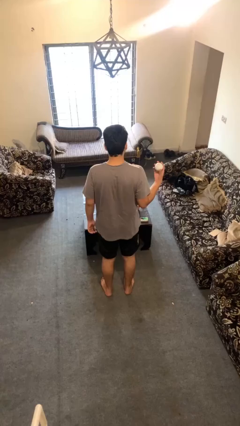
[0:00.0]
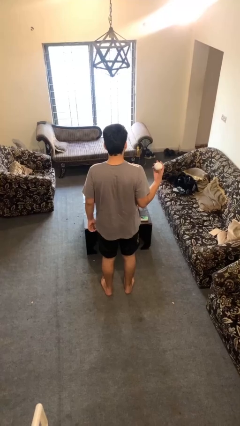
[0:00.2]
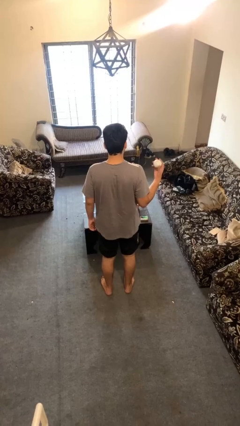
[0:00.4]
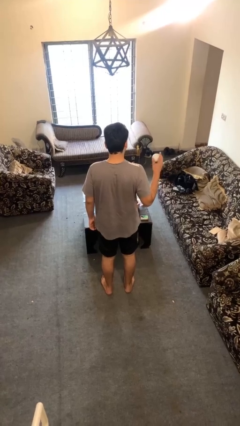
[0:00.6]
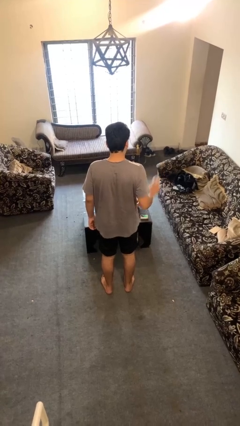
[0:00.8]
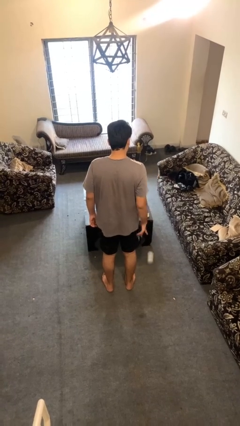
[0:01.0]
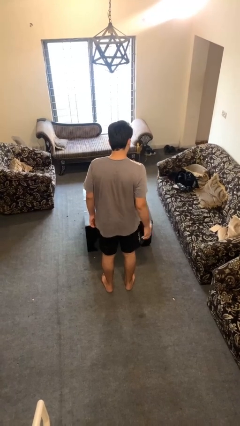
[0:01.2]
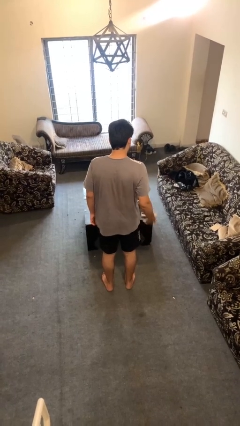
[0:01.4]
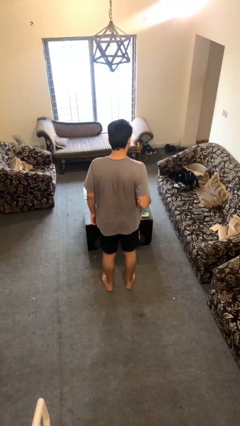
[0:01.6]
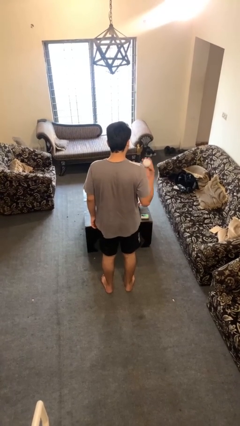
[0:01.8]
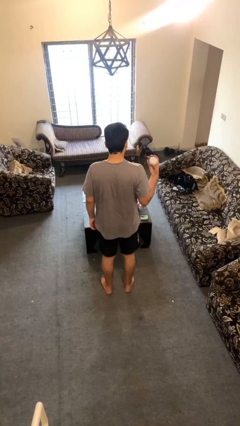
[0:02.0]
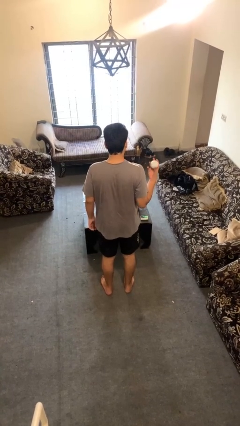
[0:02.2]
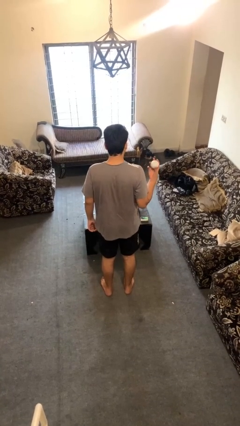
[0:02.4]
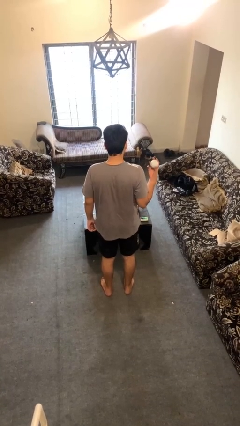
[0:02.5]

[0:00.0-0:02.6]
person bounces ball on floor

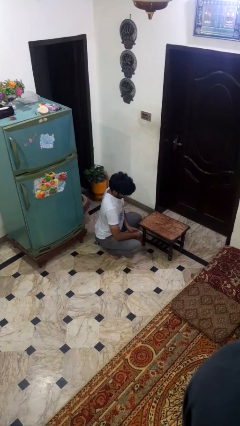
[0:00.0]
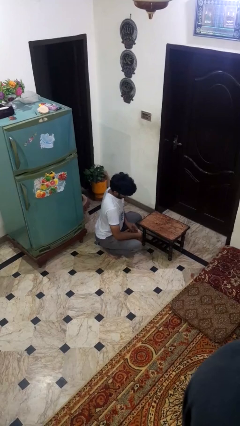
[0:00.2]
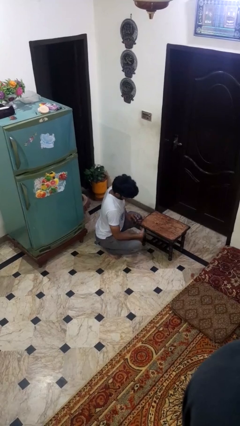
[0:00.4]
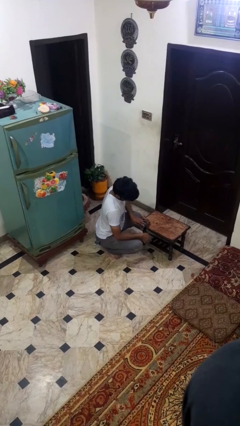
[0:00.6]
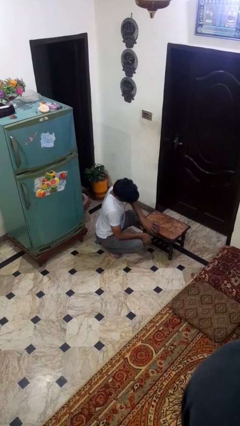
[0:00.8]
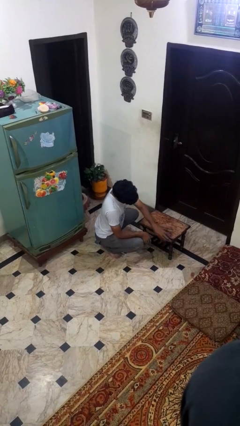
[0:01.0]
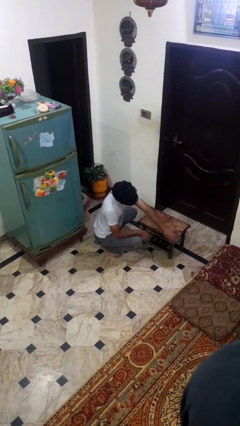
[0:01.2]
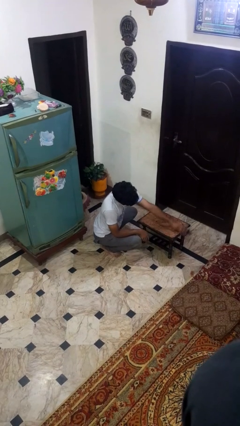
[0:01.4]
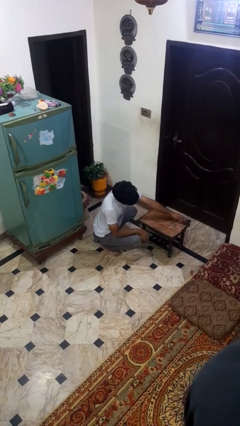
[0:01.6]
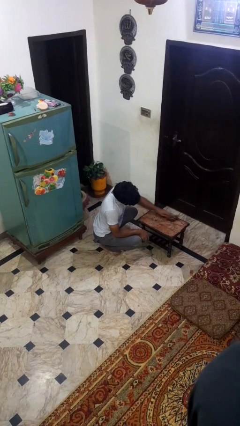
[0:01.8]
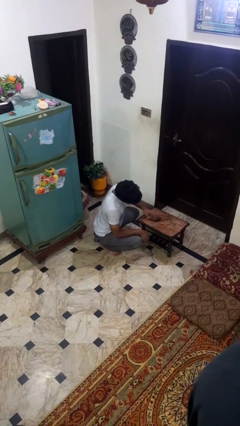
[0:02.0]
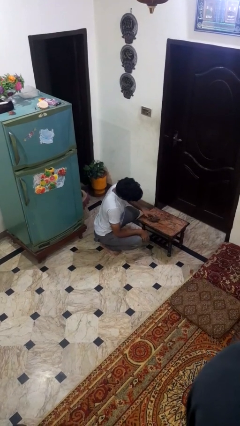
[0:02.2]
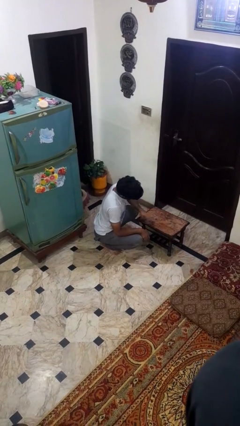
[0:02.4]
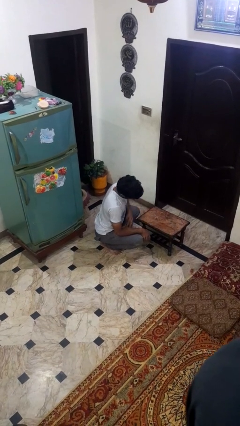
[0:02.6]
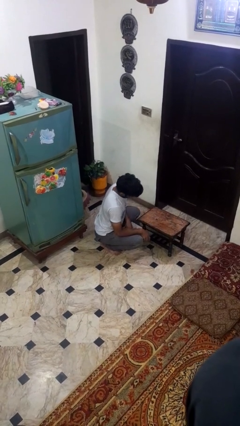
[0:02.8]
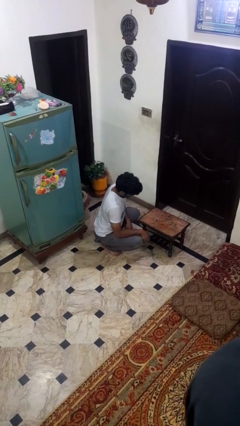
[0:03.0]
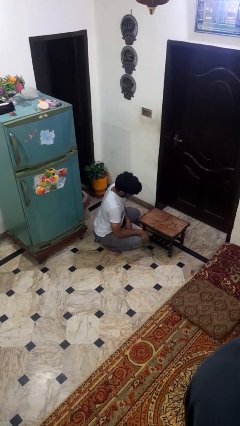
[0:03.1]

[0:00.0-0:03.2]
person cleans table with rag

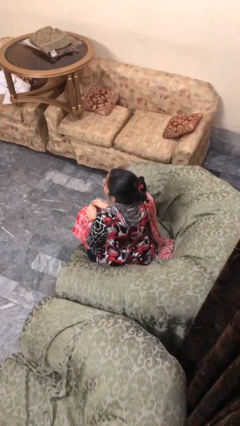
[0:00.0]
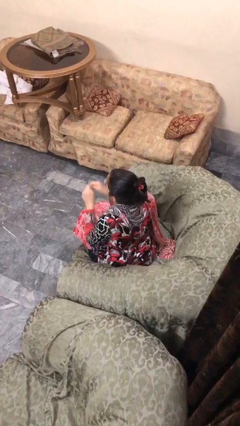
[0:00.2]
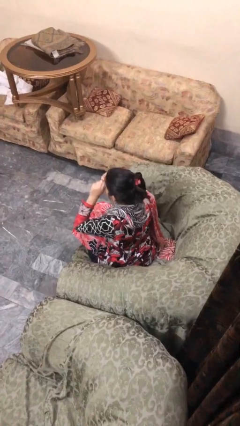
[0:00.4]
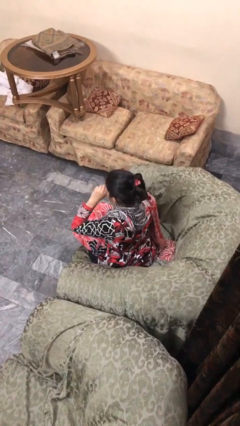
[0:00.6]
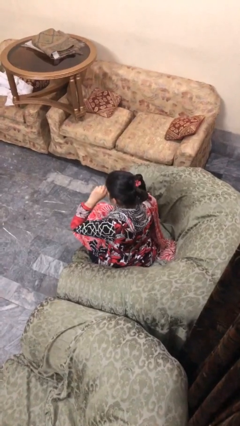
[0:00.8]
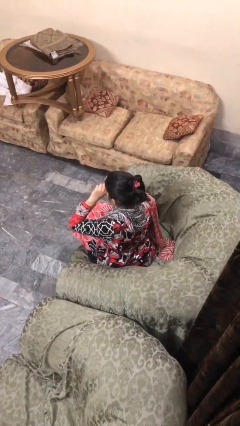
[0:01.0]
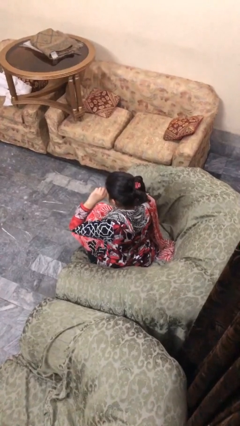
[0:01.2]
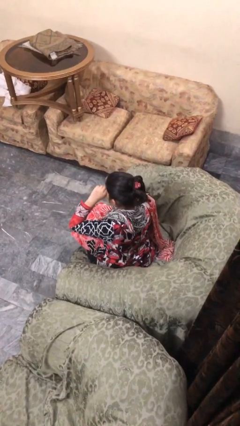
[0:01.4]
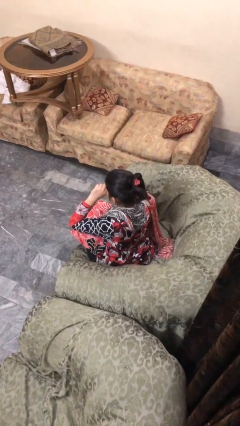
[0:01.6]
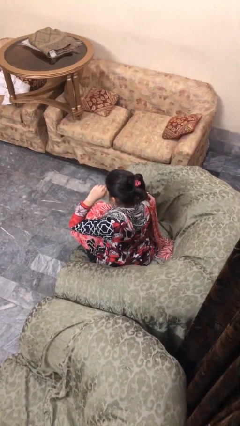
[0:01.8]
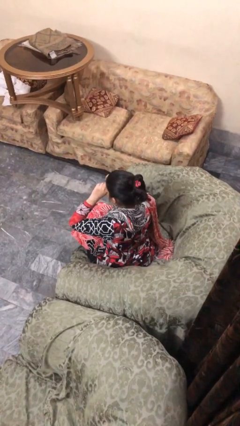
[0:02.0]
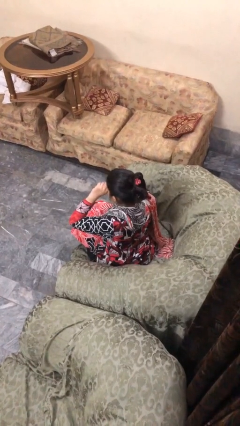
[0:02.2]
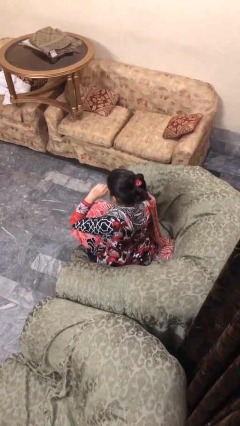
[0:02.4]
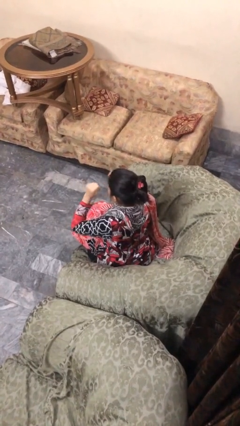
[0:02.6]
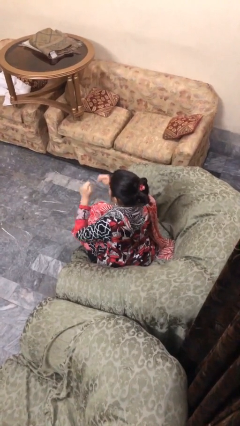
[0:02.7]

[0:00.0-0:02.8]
person rubs eyes

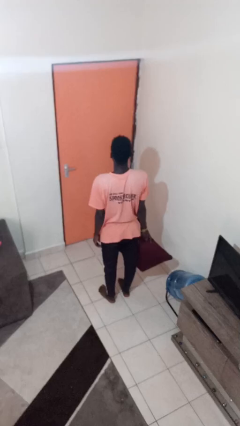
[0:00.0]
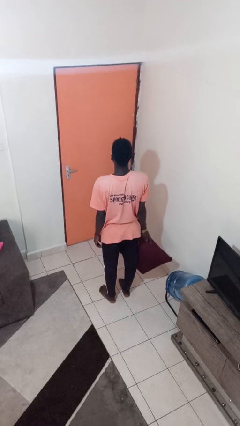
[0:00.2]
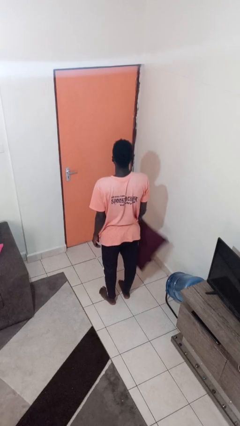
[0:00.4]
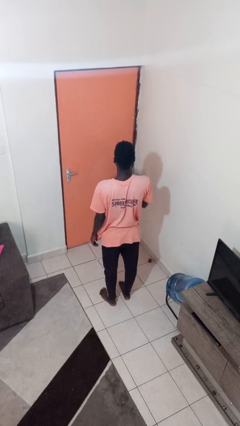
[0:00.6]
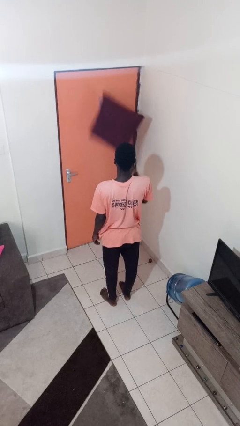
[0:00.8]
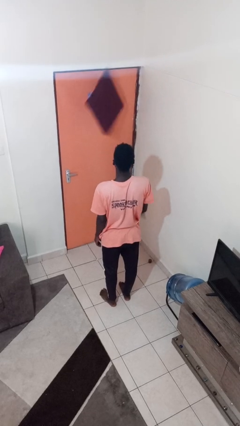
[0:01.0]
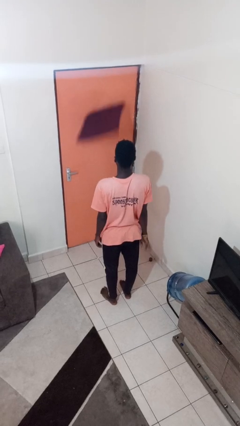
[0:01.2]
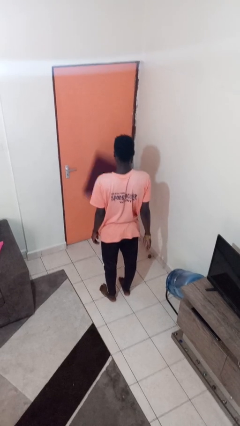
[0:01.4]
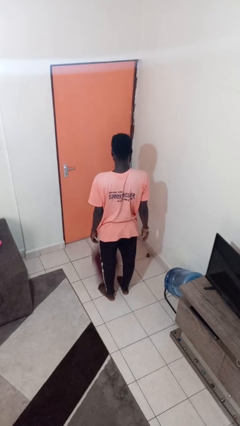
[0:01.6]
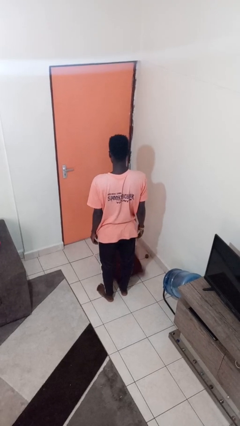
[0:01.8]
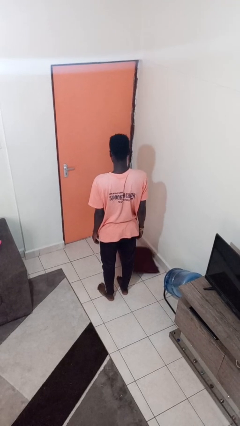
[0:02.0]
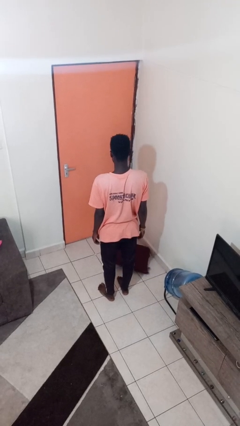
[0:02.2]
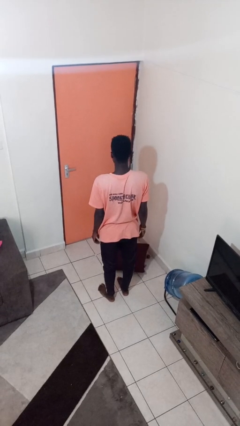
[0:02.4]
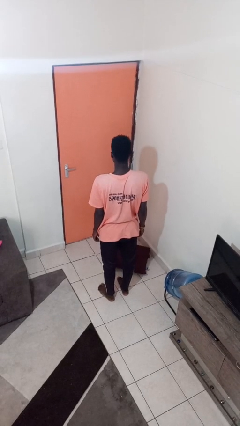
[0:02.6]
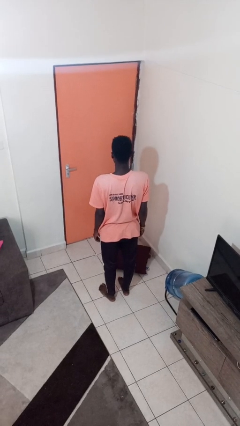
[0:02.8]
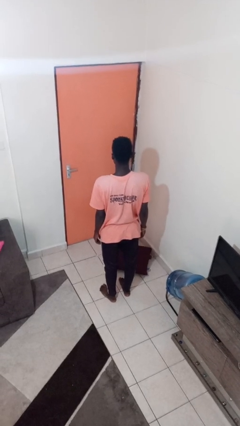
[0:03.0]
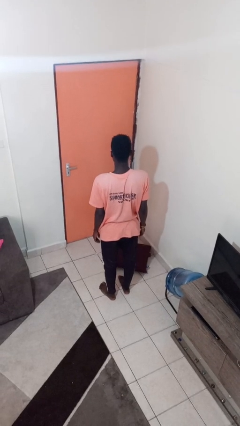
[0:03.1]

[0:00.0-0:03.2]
person throws object into air

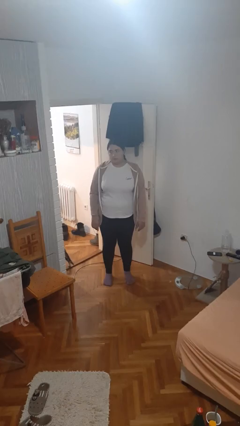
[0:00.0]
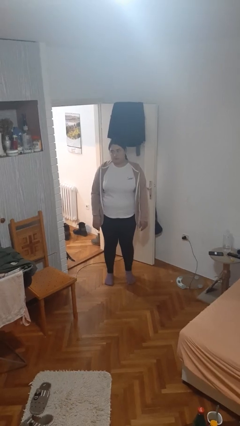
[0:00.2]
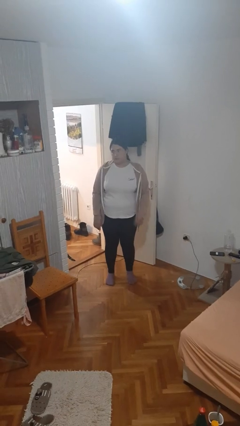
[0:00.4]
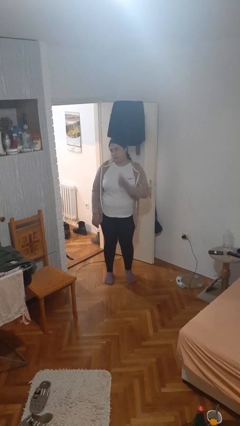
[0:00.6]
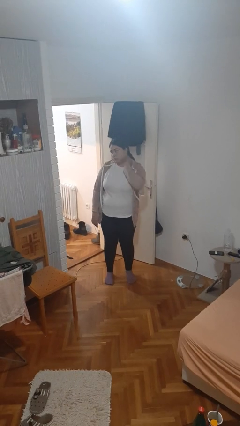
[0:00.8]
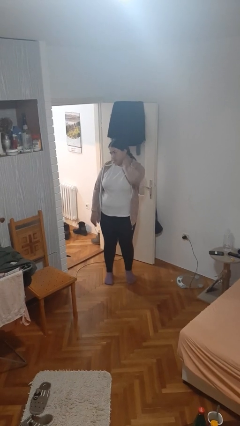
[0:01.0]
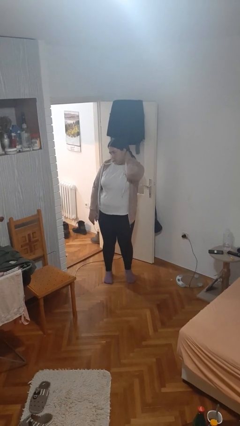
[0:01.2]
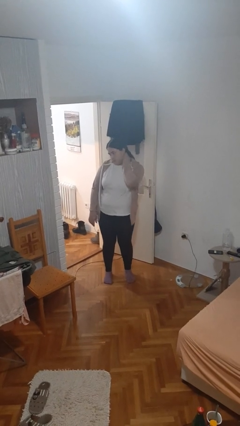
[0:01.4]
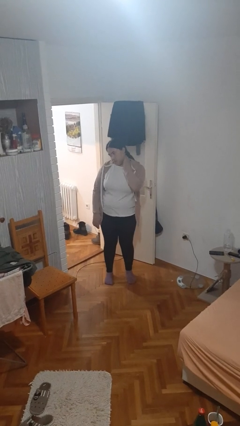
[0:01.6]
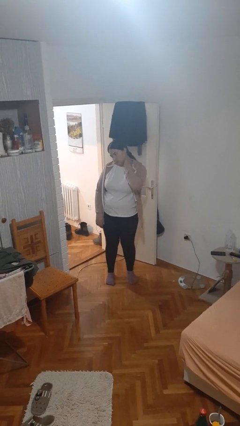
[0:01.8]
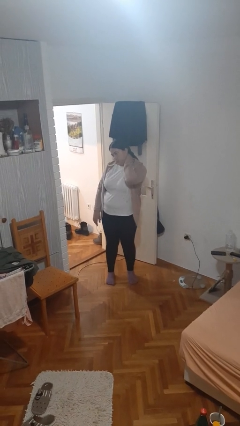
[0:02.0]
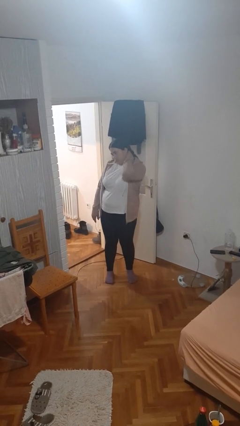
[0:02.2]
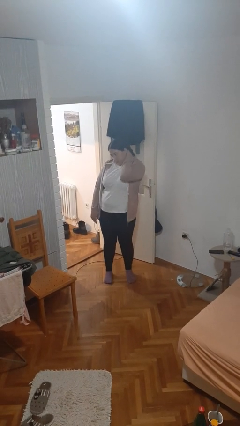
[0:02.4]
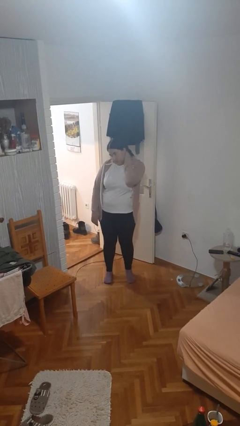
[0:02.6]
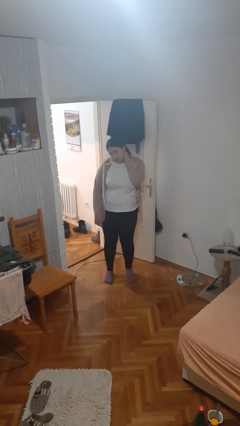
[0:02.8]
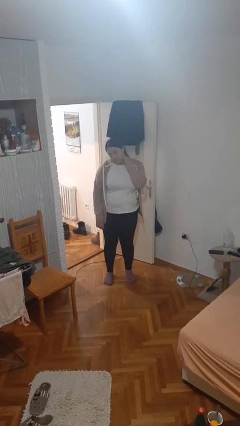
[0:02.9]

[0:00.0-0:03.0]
person rubs neck

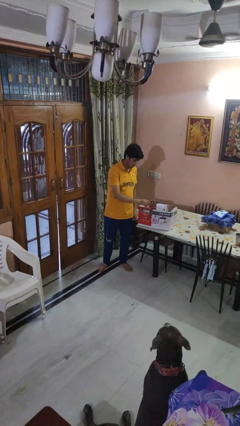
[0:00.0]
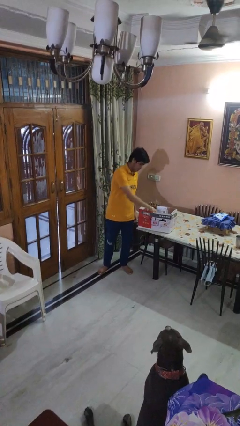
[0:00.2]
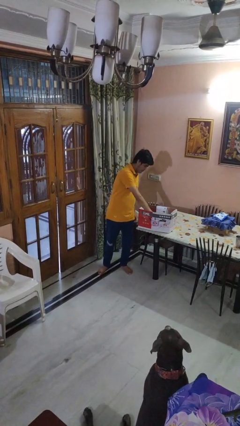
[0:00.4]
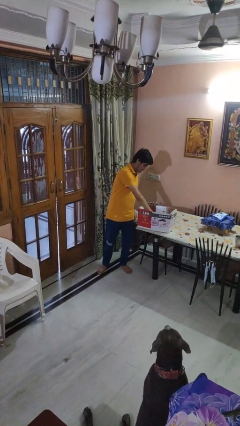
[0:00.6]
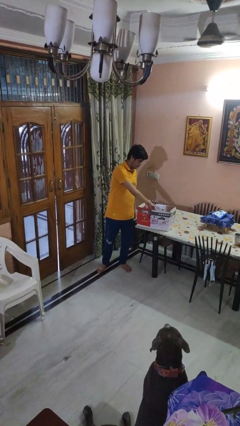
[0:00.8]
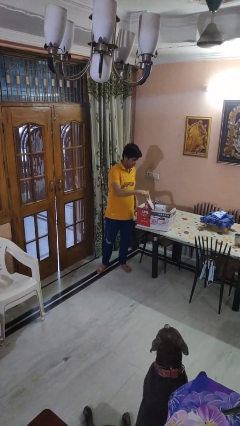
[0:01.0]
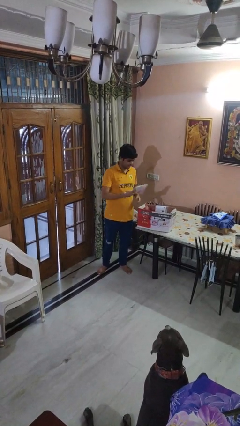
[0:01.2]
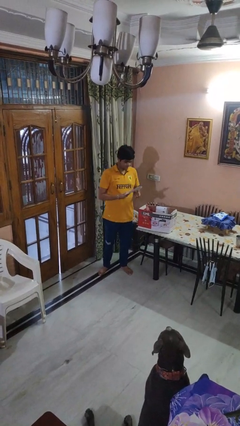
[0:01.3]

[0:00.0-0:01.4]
person takes object from box

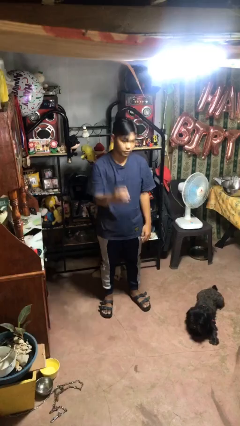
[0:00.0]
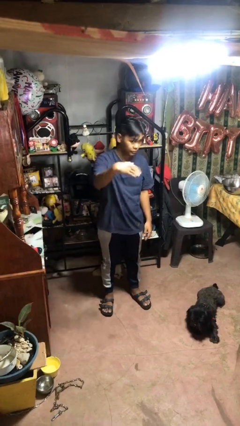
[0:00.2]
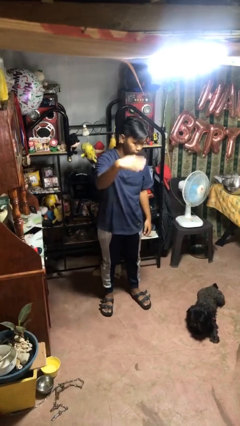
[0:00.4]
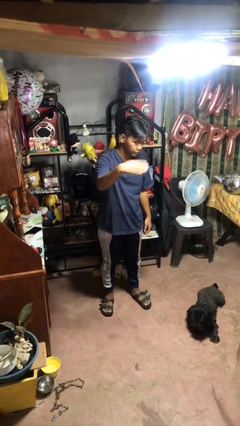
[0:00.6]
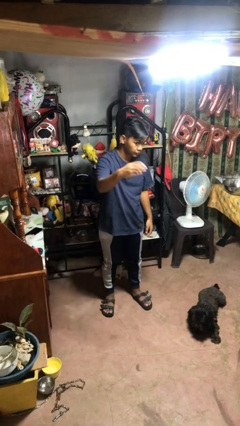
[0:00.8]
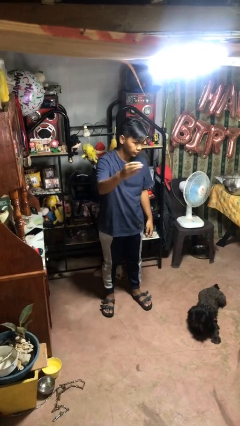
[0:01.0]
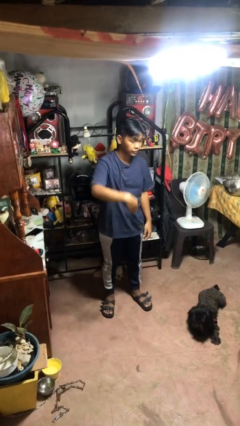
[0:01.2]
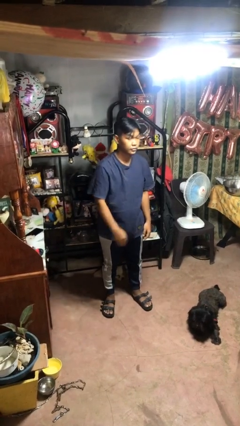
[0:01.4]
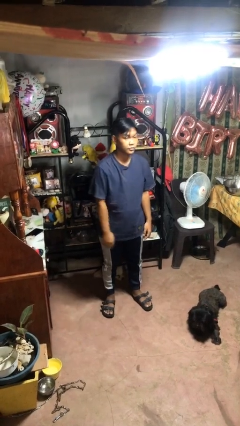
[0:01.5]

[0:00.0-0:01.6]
person gestures come here
